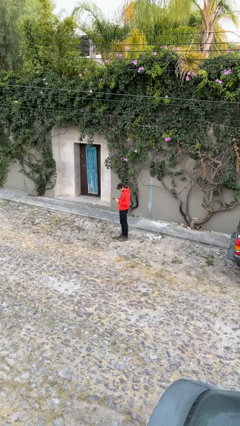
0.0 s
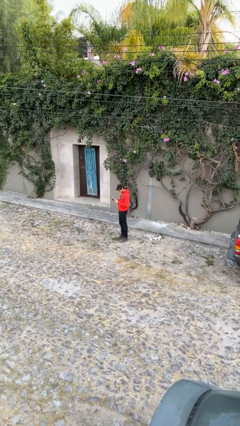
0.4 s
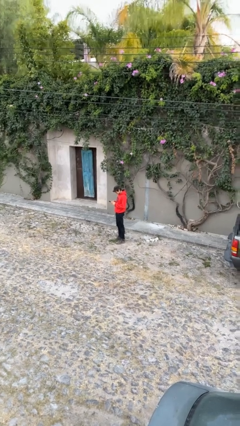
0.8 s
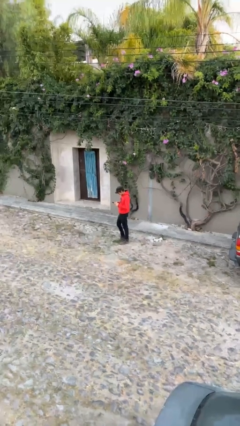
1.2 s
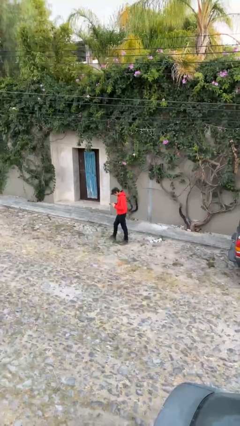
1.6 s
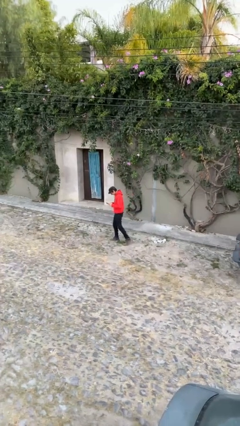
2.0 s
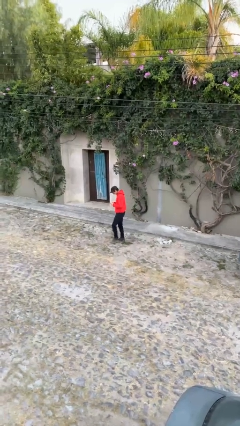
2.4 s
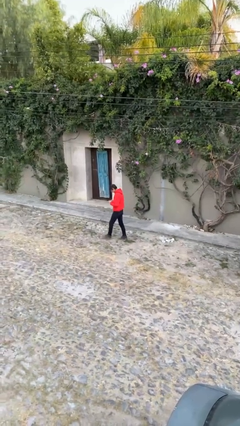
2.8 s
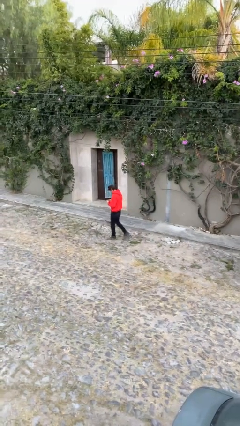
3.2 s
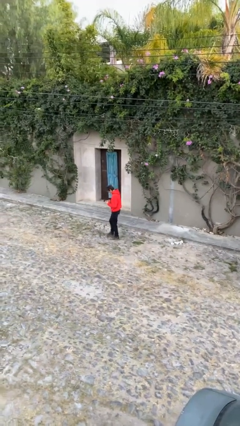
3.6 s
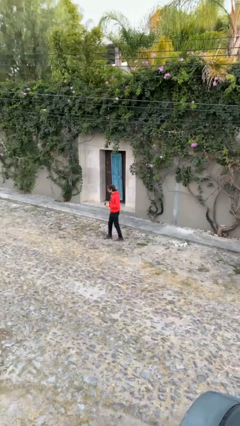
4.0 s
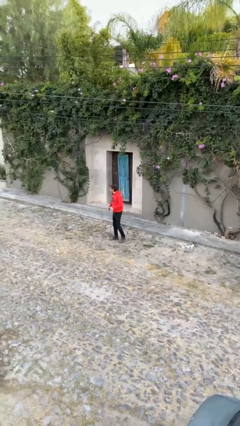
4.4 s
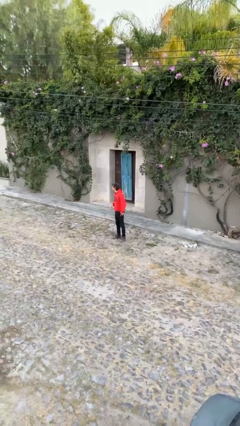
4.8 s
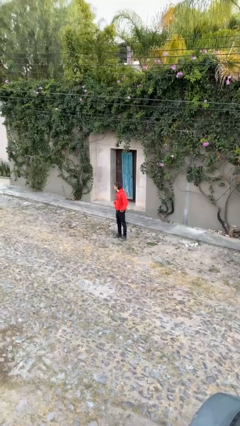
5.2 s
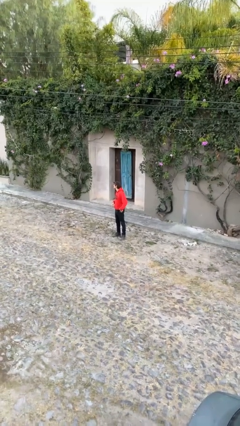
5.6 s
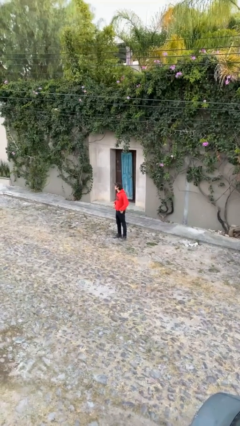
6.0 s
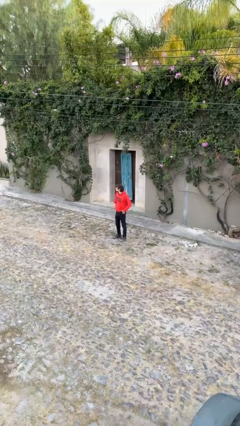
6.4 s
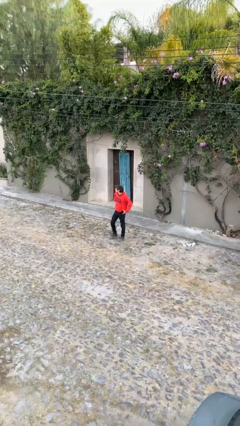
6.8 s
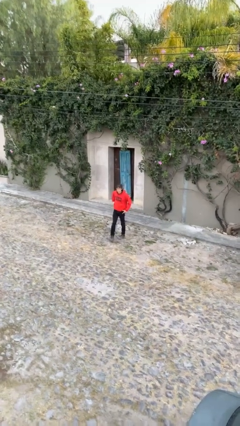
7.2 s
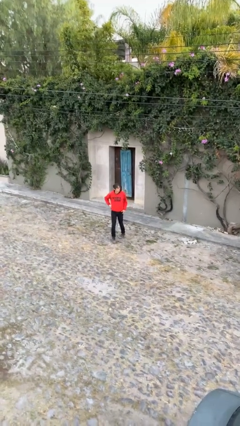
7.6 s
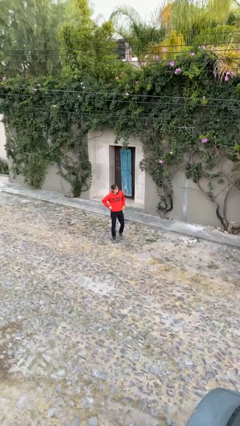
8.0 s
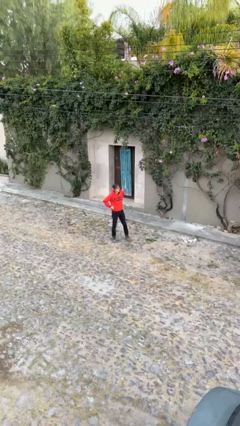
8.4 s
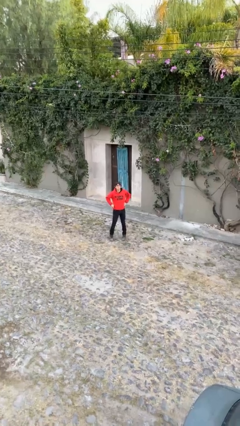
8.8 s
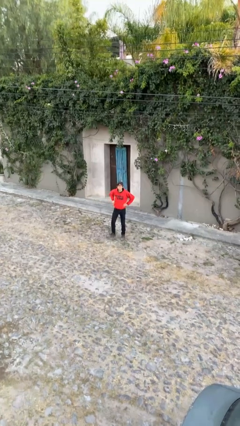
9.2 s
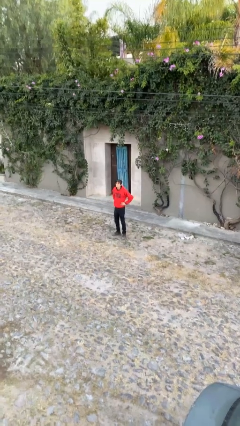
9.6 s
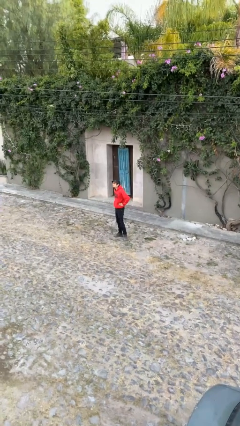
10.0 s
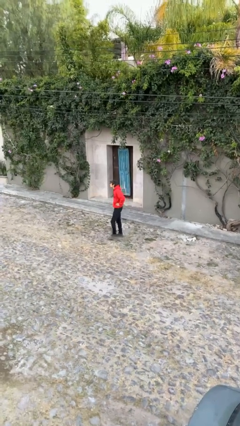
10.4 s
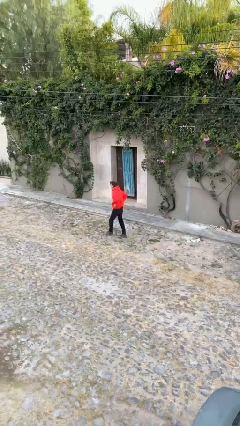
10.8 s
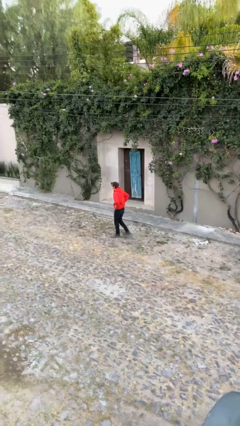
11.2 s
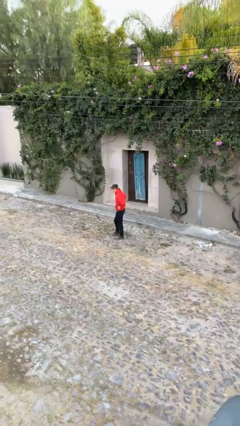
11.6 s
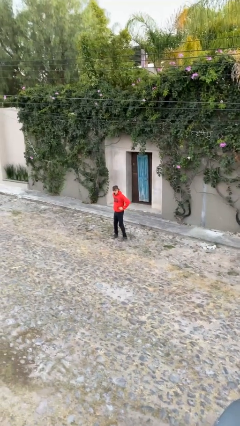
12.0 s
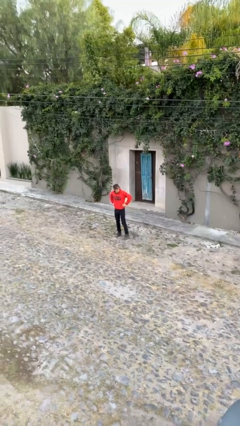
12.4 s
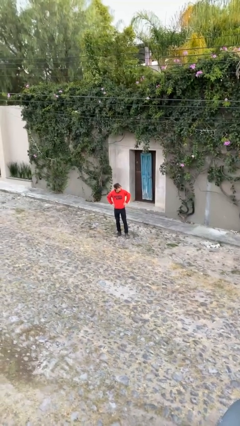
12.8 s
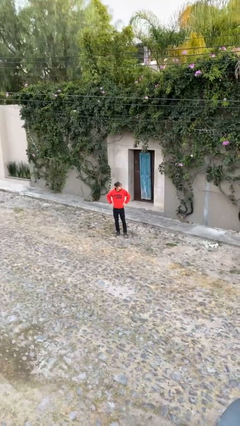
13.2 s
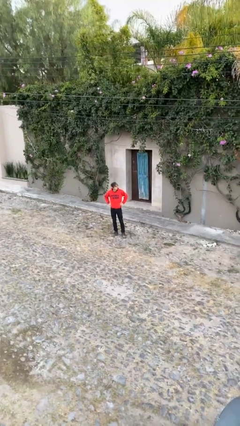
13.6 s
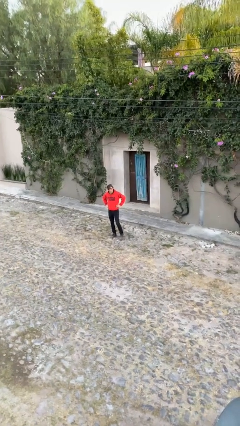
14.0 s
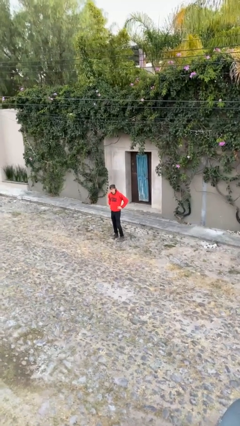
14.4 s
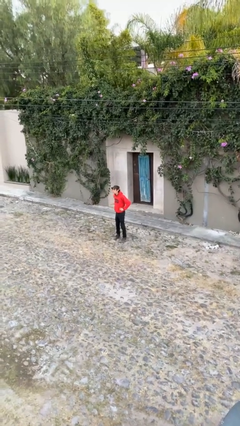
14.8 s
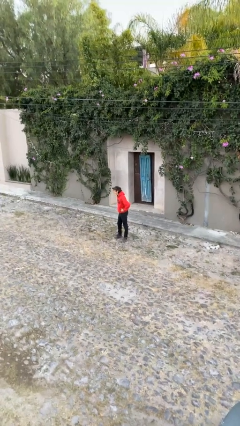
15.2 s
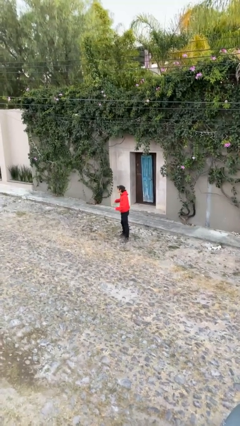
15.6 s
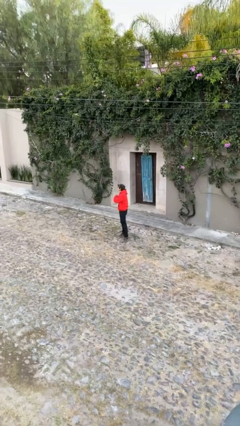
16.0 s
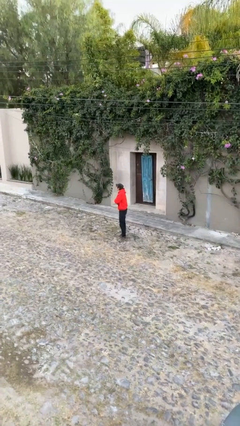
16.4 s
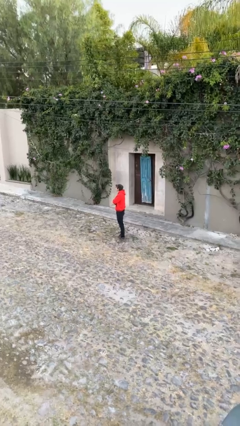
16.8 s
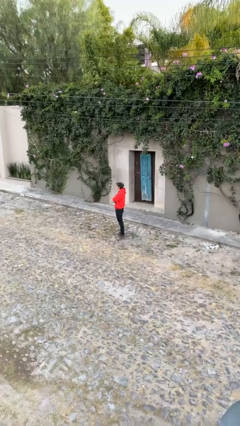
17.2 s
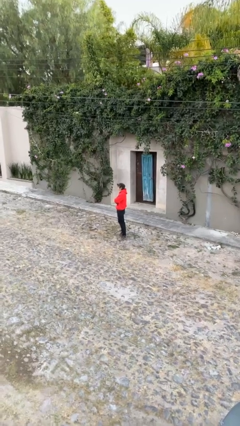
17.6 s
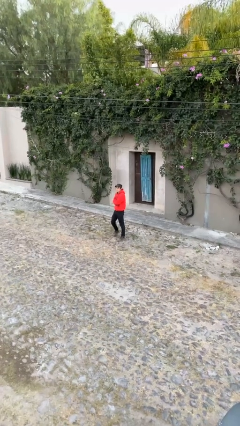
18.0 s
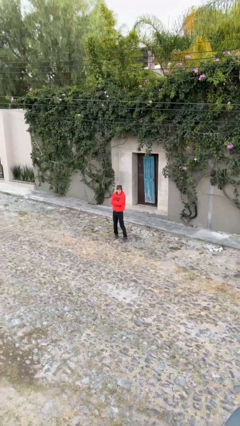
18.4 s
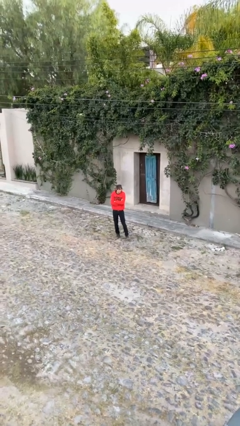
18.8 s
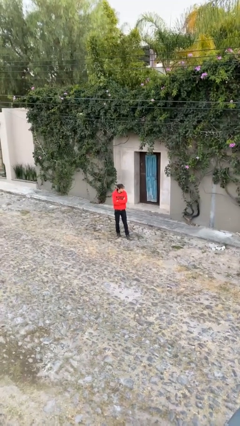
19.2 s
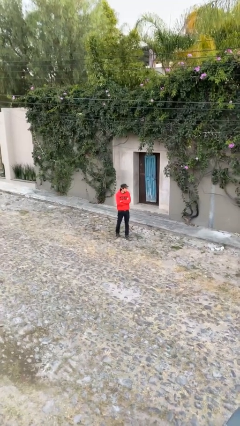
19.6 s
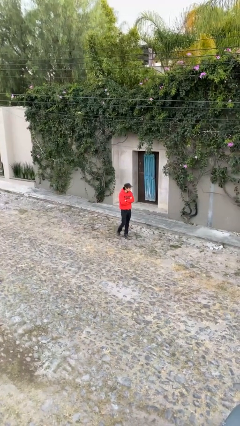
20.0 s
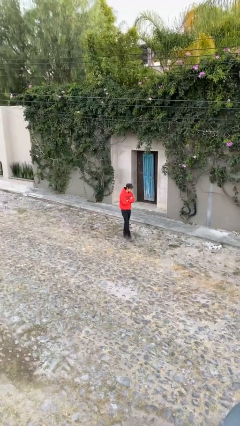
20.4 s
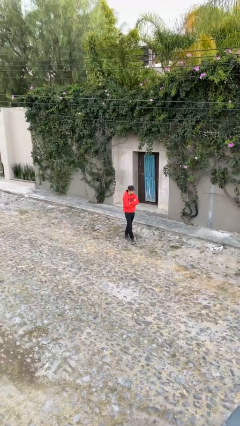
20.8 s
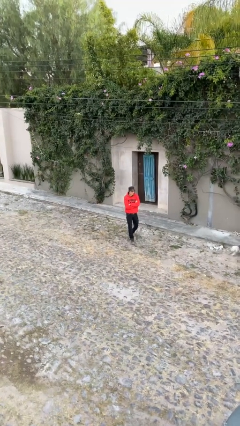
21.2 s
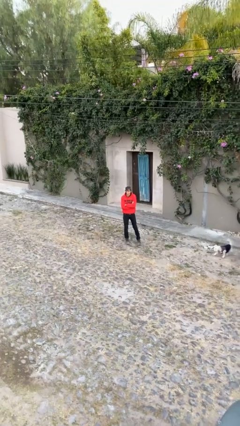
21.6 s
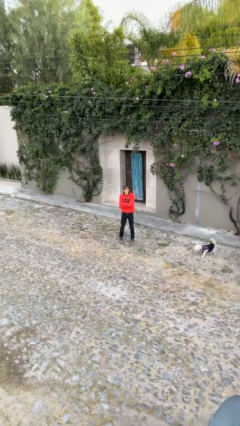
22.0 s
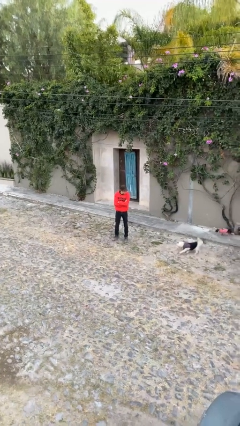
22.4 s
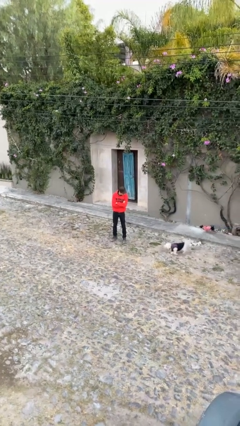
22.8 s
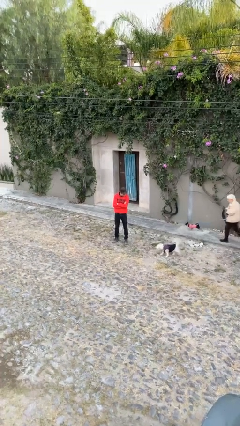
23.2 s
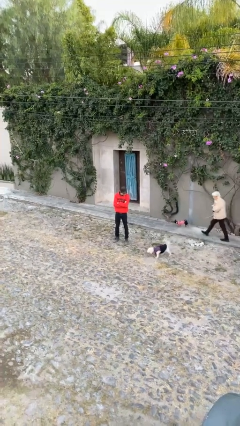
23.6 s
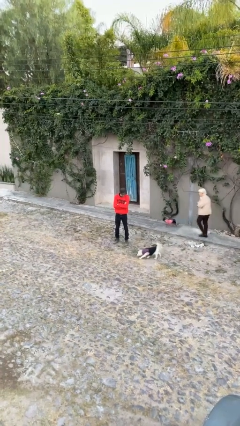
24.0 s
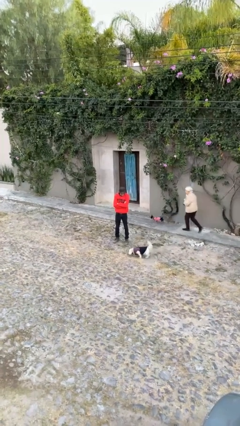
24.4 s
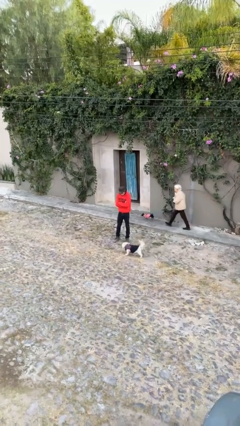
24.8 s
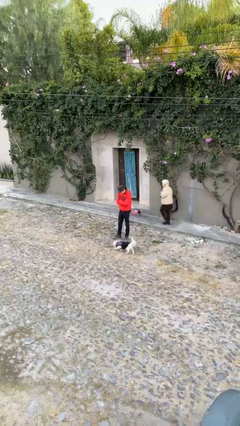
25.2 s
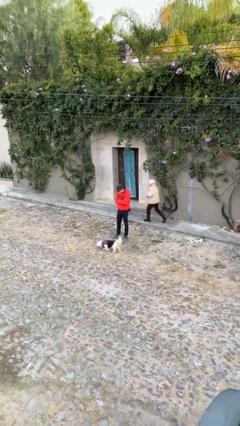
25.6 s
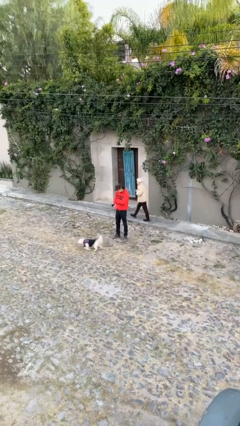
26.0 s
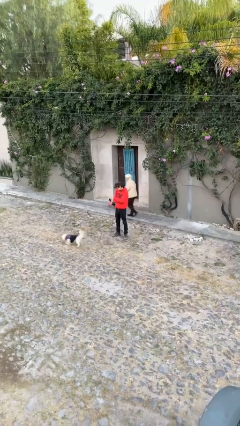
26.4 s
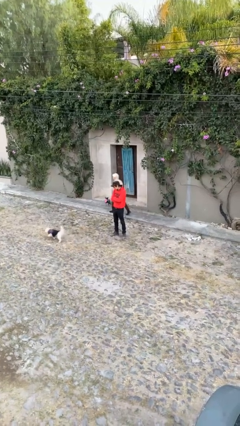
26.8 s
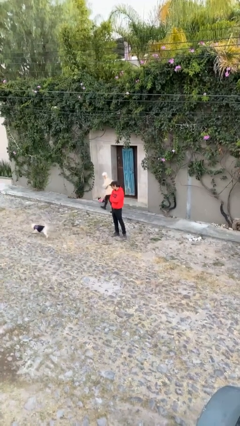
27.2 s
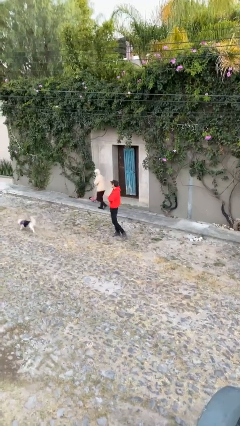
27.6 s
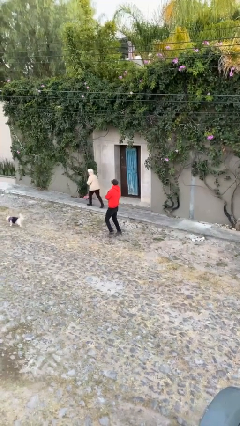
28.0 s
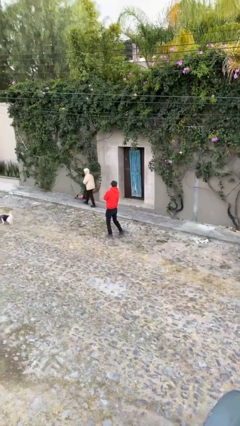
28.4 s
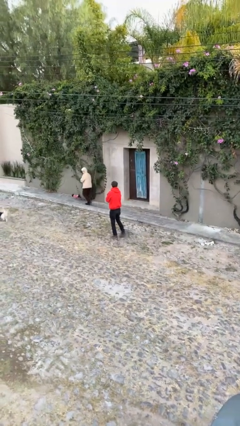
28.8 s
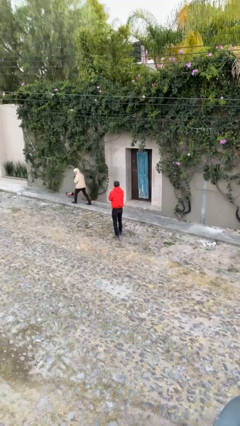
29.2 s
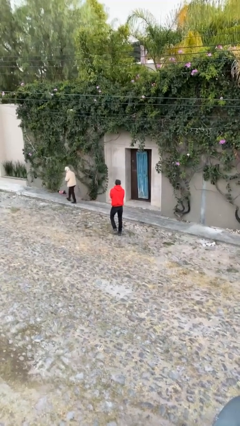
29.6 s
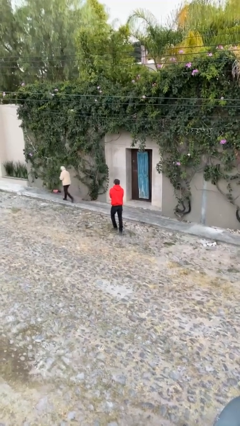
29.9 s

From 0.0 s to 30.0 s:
person walks

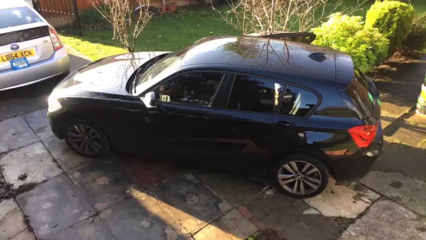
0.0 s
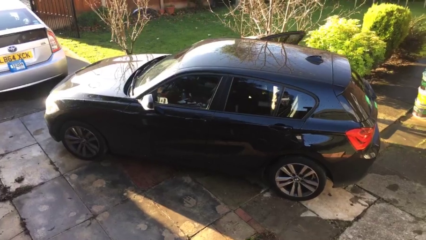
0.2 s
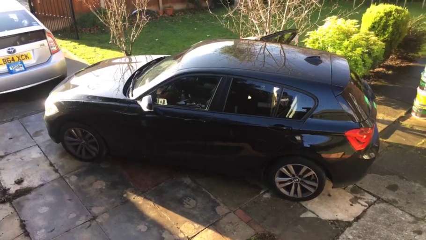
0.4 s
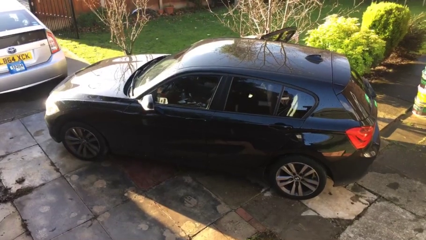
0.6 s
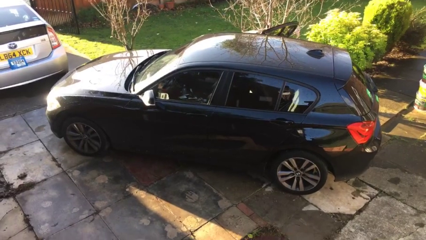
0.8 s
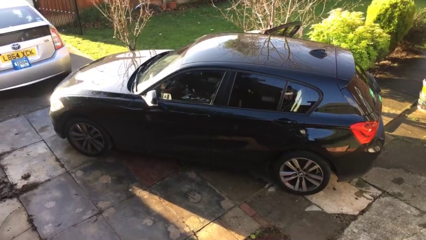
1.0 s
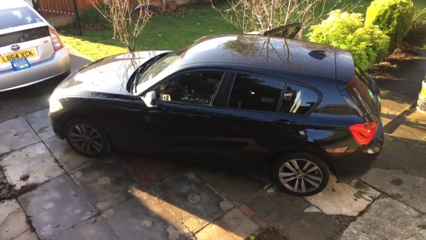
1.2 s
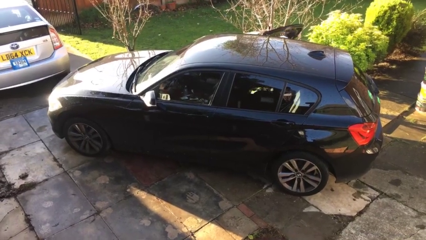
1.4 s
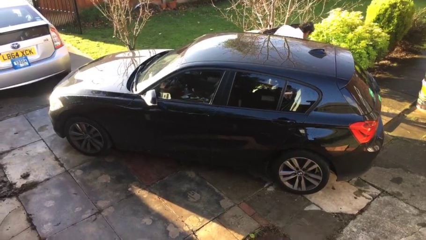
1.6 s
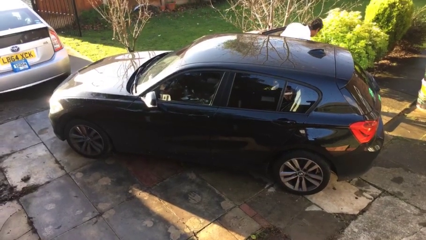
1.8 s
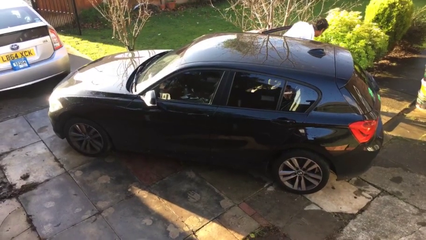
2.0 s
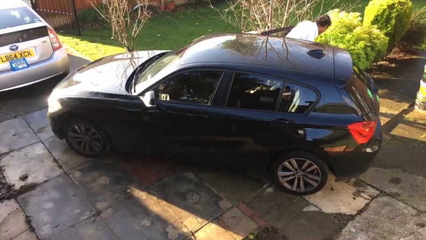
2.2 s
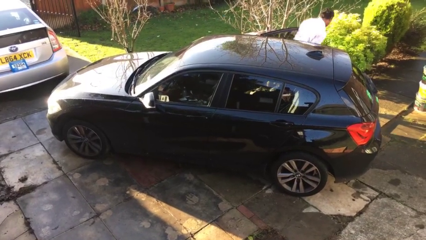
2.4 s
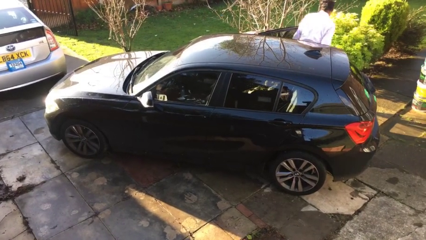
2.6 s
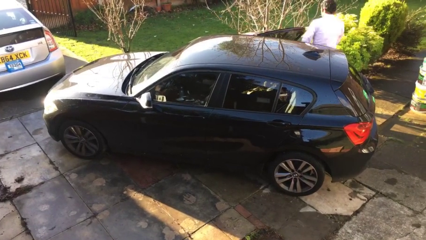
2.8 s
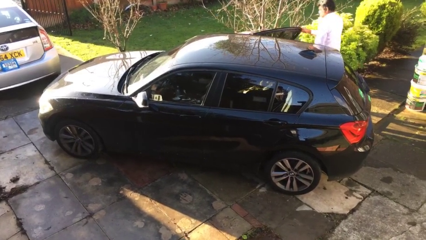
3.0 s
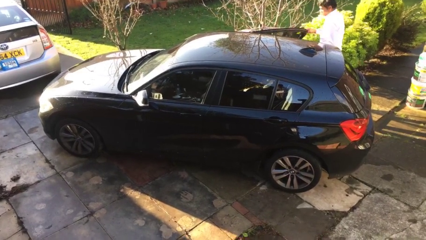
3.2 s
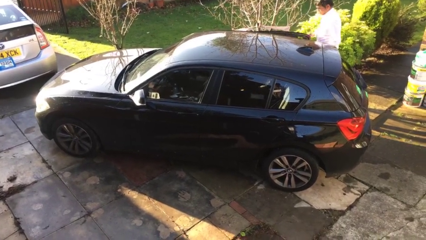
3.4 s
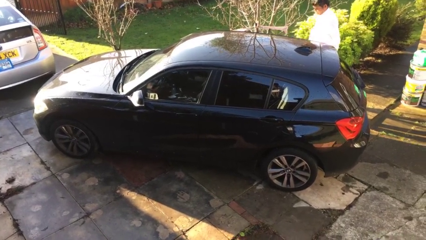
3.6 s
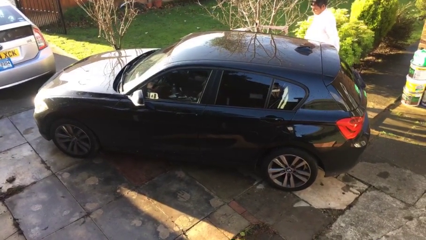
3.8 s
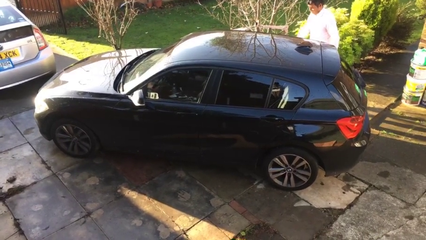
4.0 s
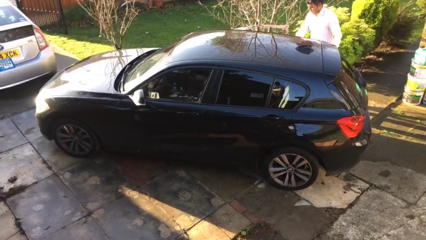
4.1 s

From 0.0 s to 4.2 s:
car drops off person
